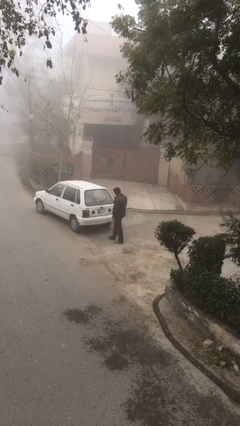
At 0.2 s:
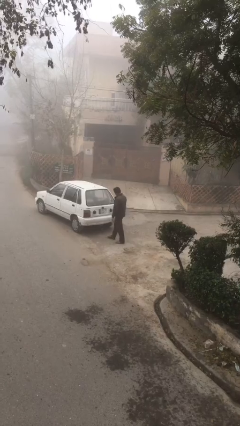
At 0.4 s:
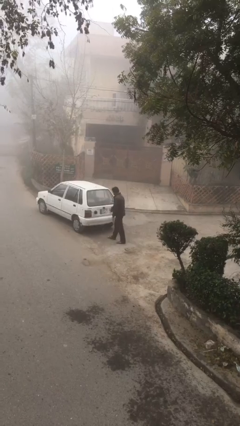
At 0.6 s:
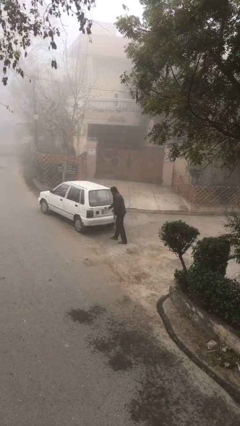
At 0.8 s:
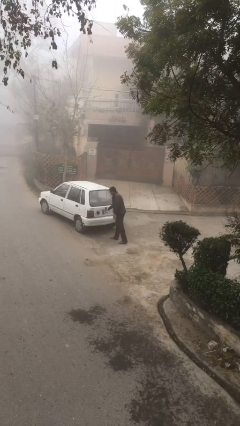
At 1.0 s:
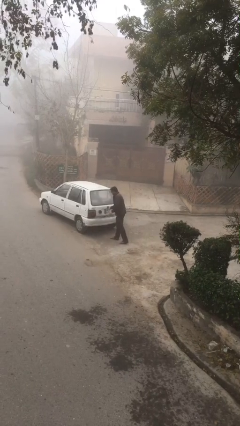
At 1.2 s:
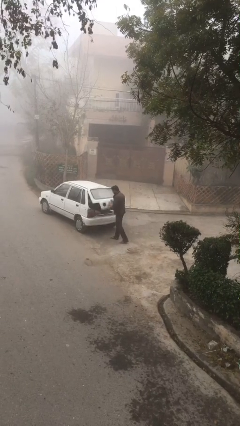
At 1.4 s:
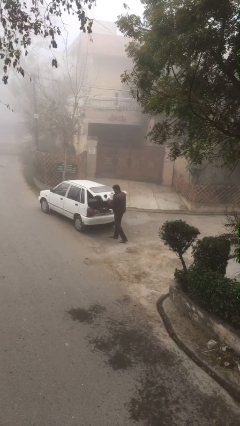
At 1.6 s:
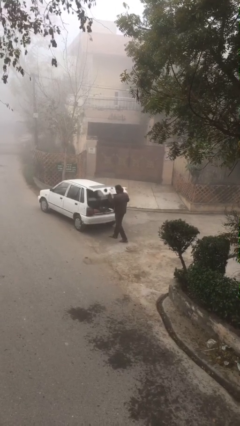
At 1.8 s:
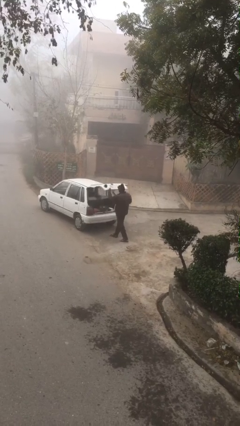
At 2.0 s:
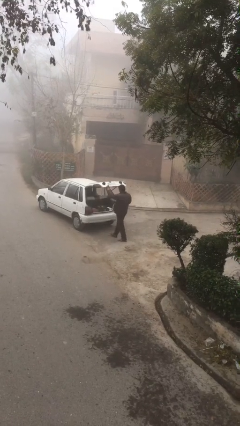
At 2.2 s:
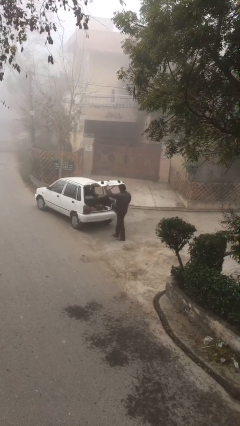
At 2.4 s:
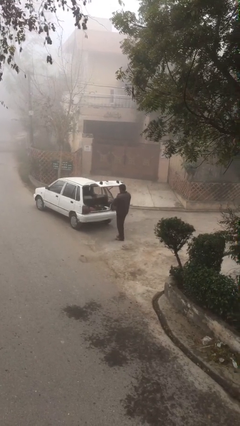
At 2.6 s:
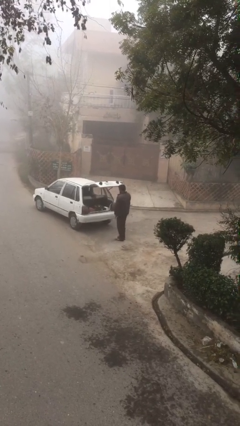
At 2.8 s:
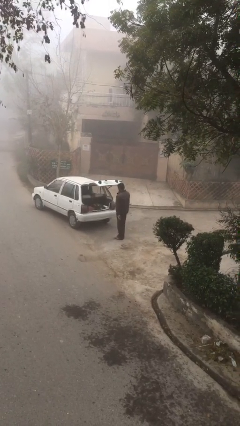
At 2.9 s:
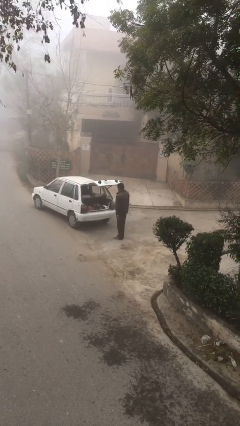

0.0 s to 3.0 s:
person opens car trunk

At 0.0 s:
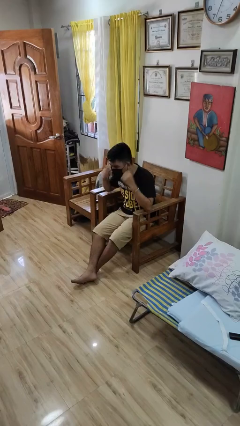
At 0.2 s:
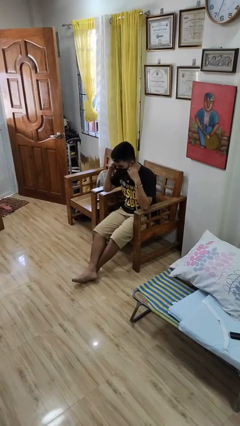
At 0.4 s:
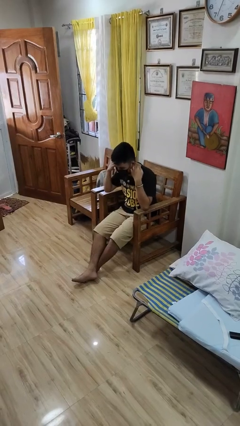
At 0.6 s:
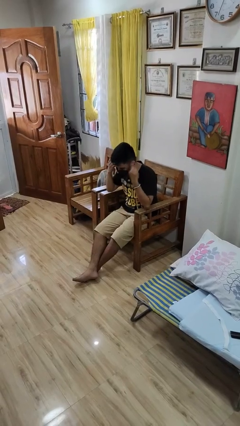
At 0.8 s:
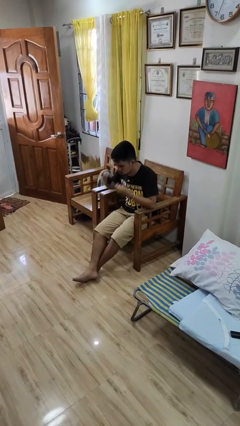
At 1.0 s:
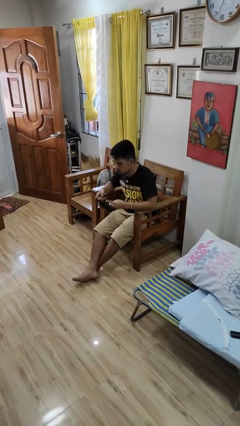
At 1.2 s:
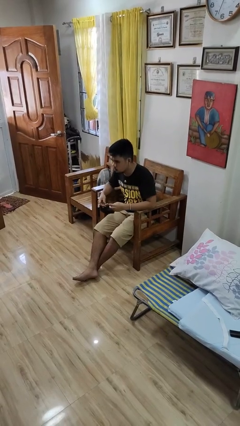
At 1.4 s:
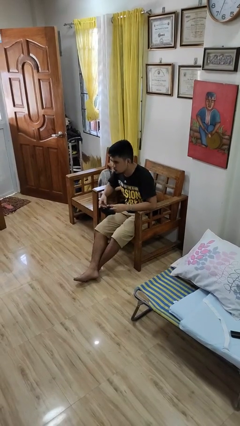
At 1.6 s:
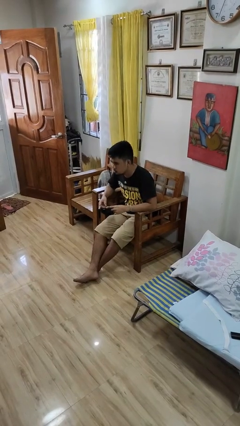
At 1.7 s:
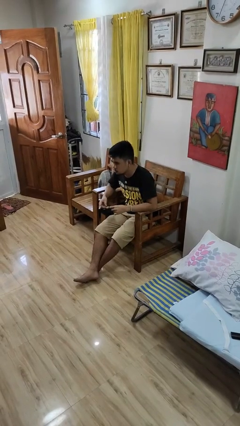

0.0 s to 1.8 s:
person takes off facemask

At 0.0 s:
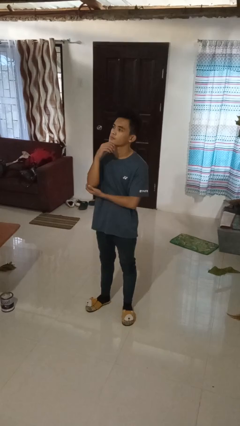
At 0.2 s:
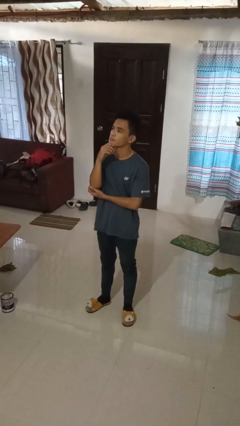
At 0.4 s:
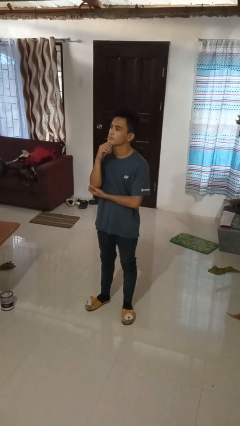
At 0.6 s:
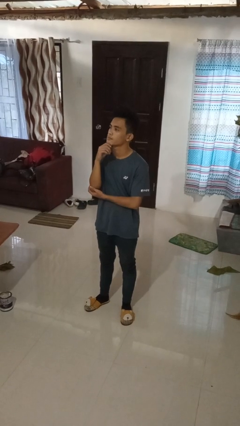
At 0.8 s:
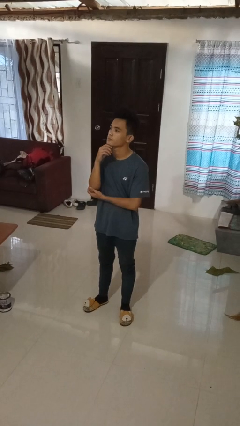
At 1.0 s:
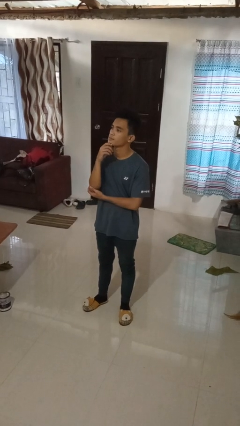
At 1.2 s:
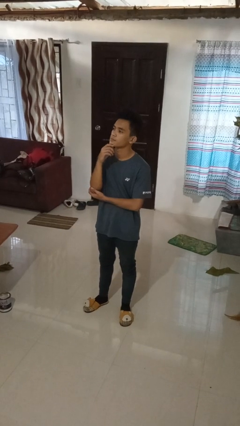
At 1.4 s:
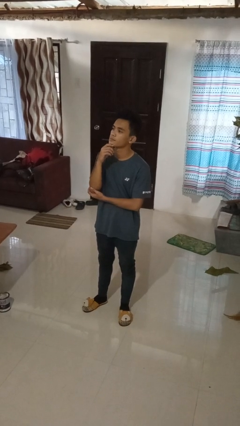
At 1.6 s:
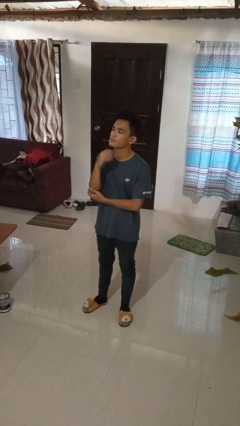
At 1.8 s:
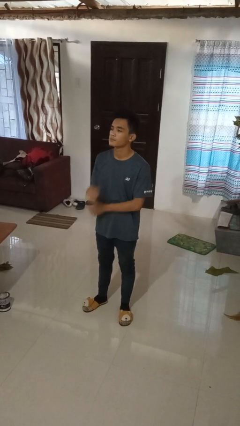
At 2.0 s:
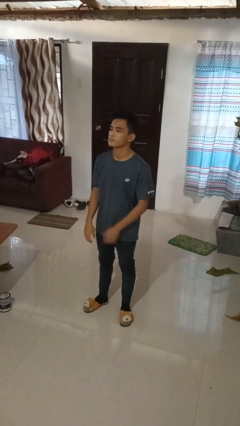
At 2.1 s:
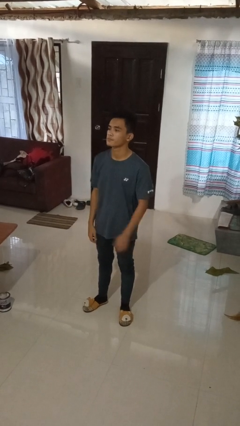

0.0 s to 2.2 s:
person strokes chin

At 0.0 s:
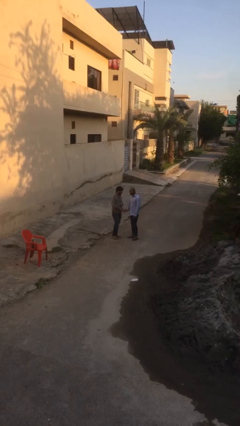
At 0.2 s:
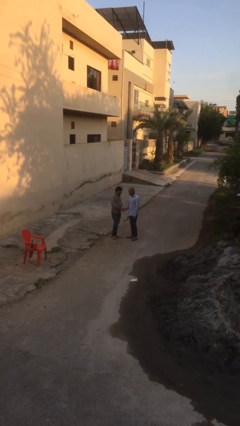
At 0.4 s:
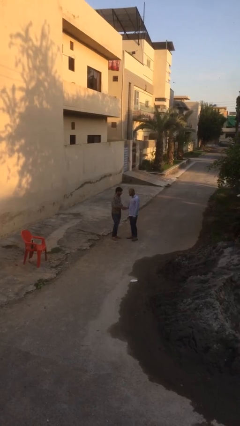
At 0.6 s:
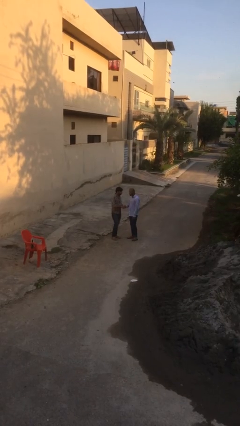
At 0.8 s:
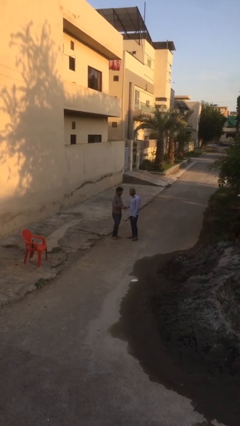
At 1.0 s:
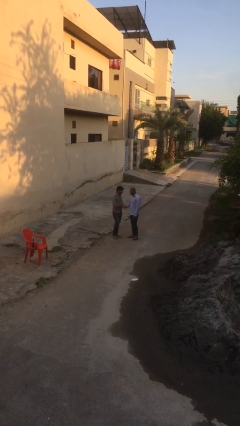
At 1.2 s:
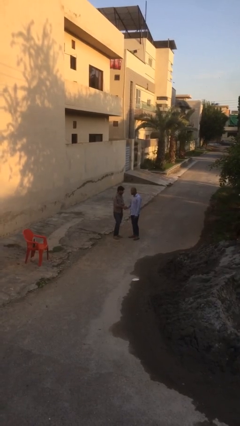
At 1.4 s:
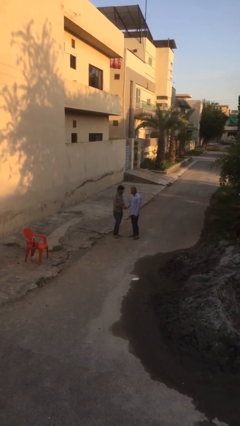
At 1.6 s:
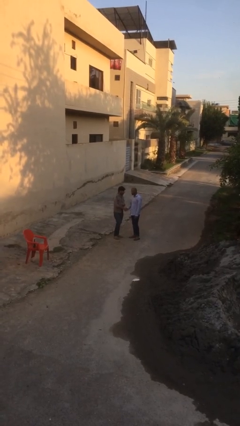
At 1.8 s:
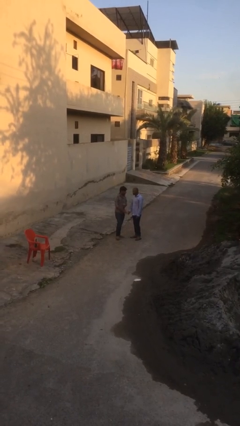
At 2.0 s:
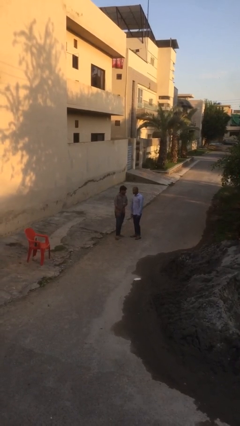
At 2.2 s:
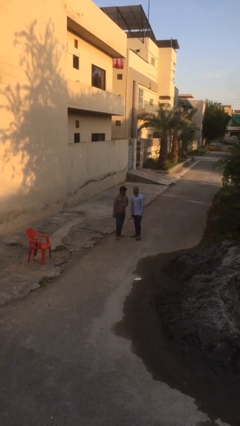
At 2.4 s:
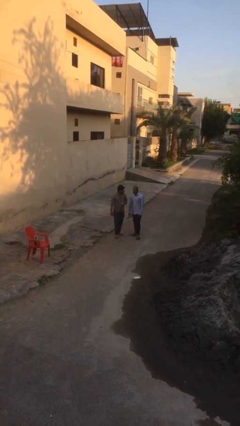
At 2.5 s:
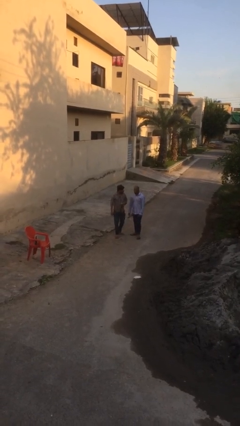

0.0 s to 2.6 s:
person shakes hand

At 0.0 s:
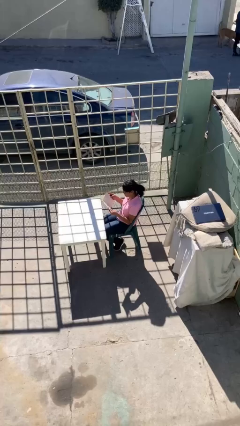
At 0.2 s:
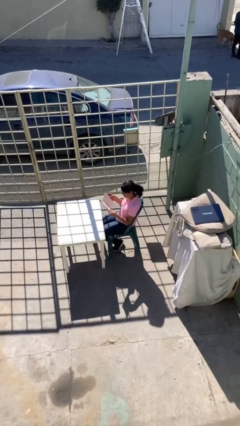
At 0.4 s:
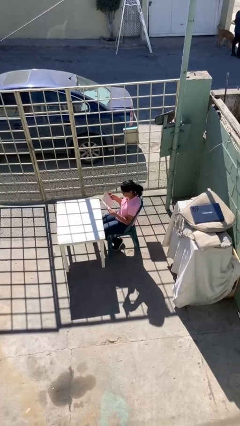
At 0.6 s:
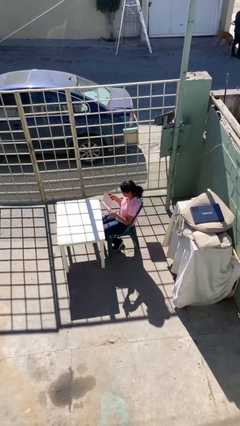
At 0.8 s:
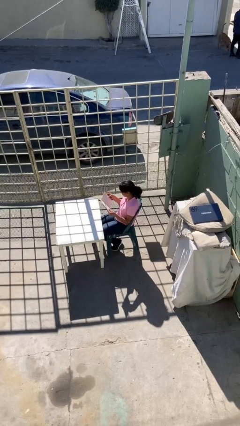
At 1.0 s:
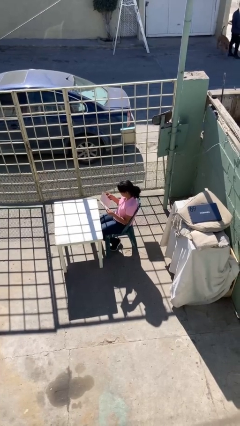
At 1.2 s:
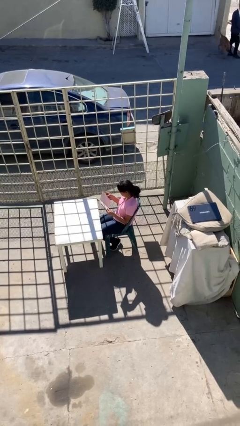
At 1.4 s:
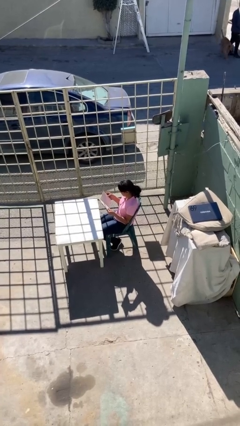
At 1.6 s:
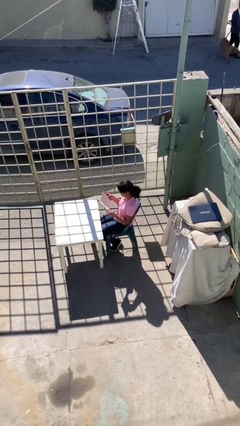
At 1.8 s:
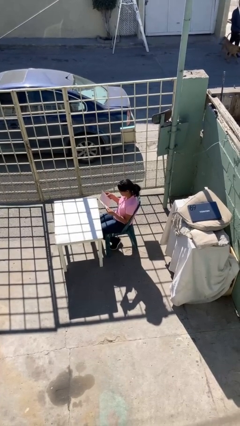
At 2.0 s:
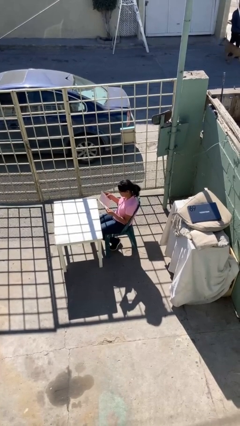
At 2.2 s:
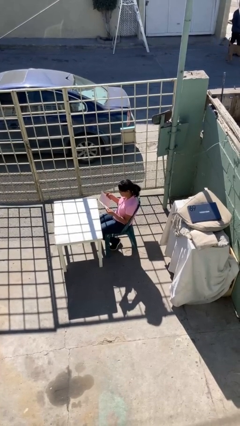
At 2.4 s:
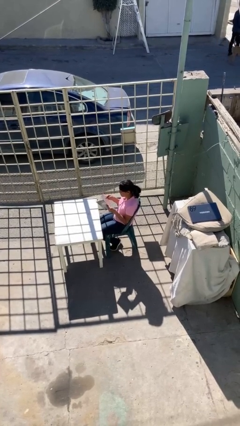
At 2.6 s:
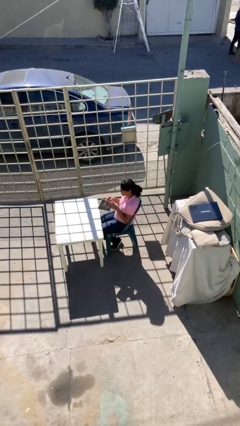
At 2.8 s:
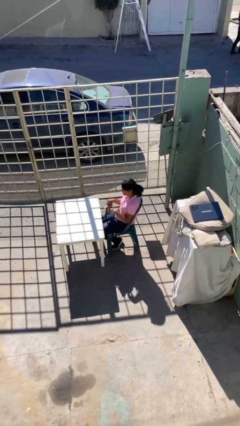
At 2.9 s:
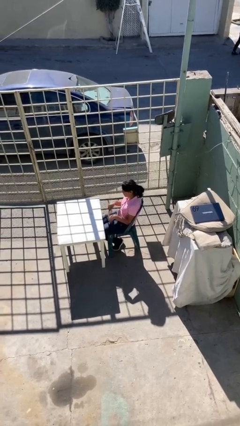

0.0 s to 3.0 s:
person reads document

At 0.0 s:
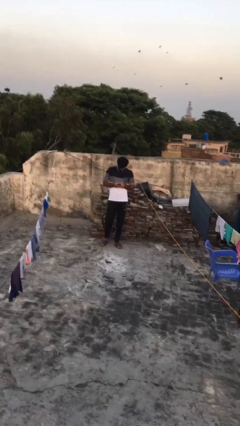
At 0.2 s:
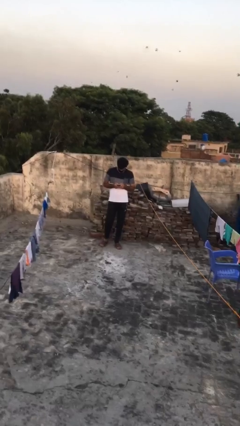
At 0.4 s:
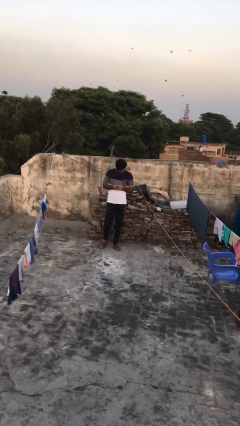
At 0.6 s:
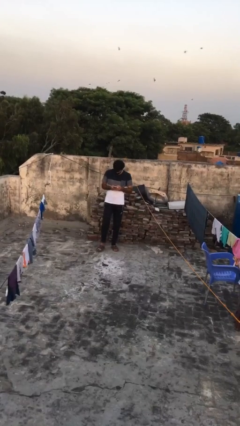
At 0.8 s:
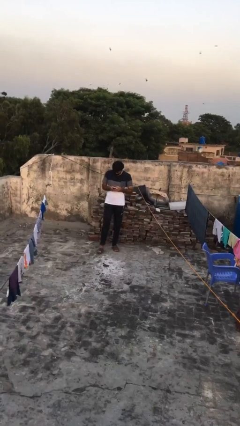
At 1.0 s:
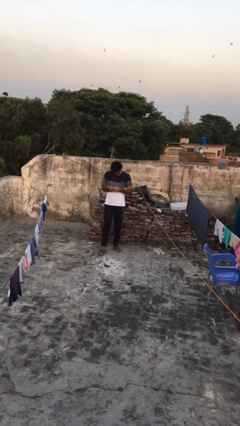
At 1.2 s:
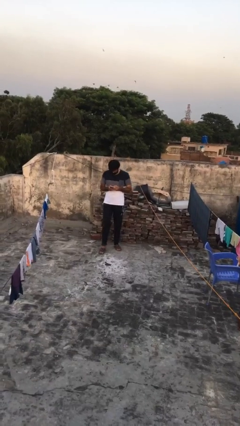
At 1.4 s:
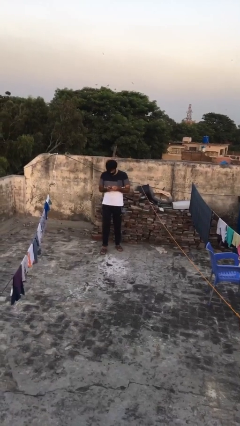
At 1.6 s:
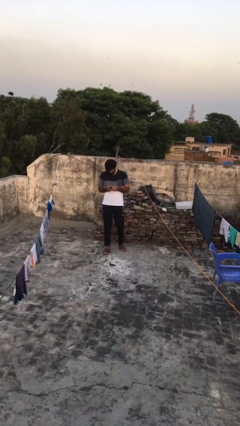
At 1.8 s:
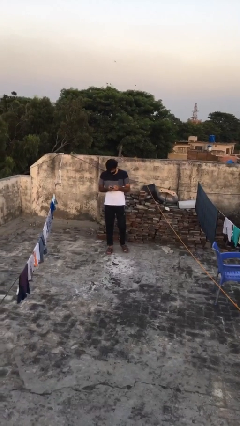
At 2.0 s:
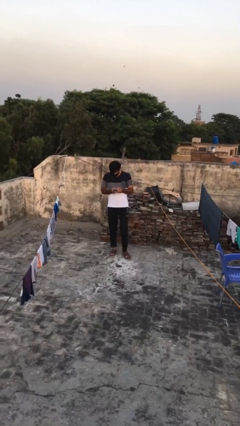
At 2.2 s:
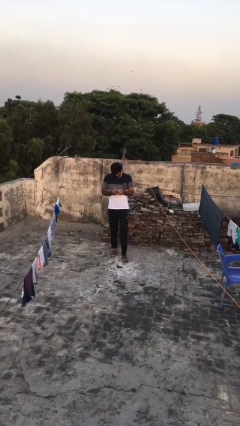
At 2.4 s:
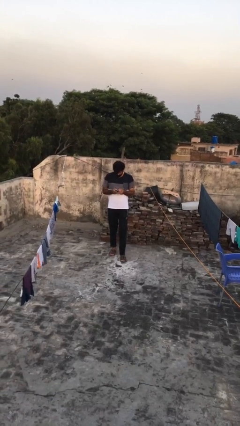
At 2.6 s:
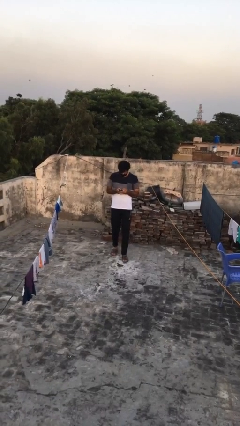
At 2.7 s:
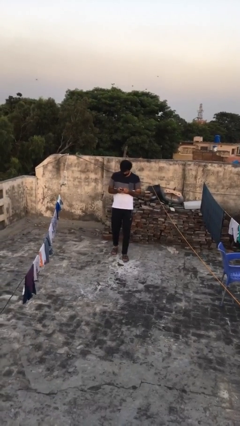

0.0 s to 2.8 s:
person texts on phone

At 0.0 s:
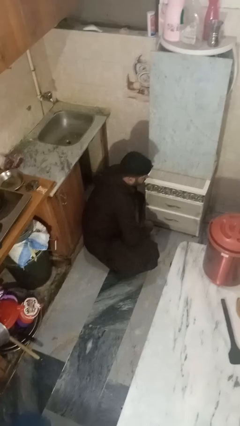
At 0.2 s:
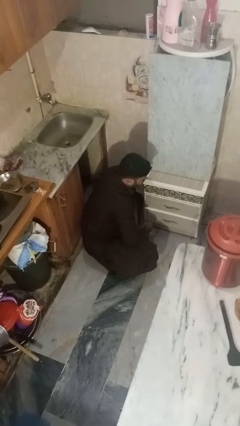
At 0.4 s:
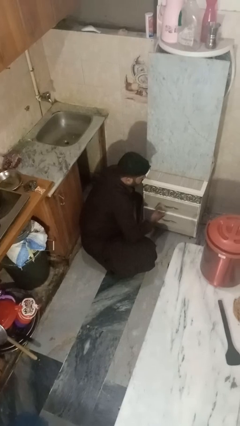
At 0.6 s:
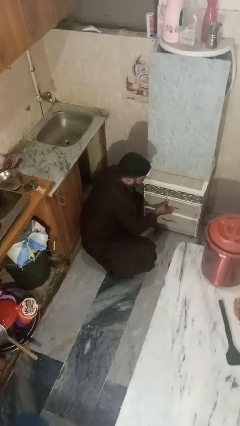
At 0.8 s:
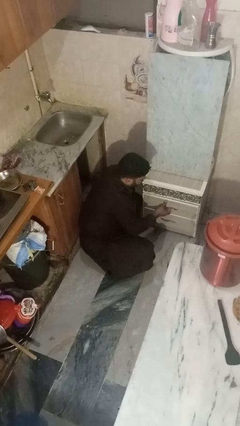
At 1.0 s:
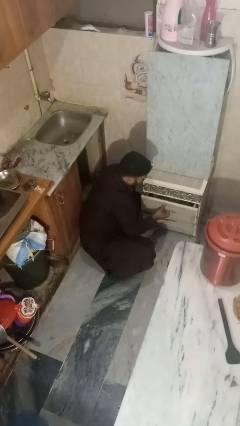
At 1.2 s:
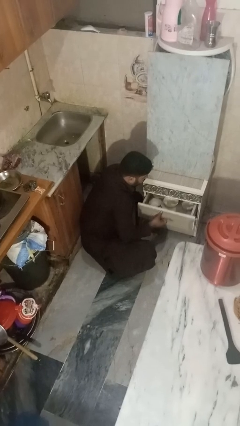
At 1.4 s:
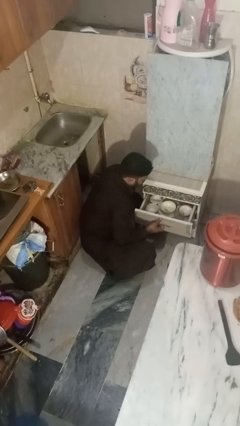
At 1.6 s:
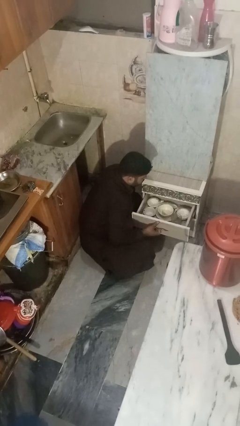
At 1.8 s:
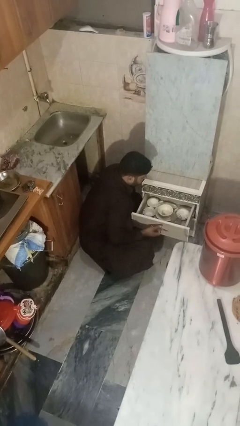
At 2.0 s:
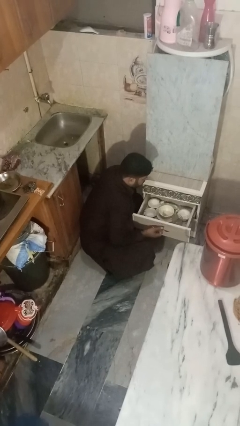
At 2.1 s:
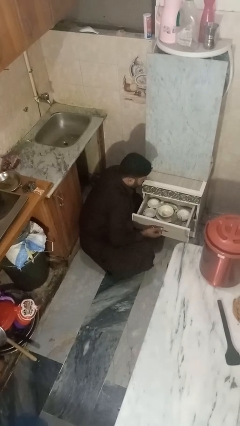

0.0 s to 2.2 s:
person opens kitchen drawer
